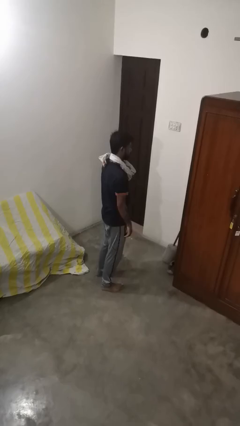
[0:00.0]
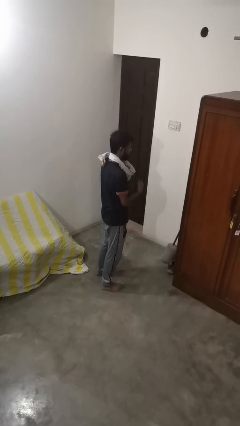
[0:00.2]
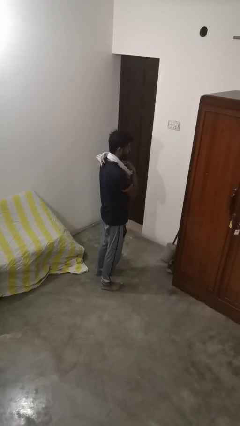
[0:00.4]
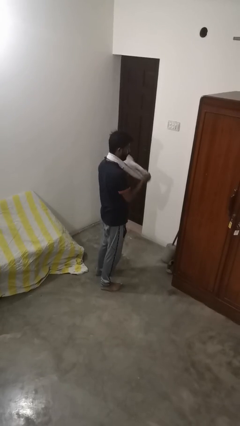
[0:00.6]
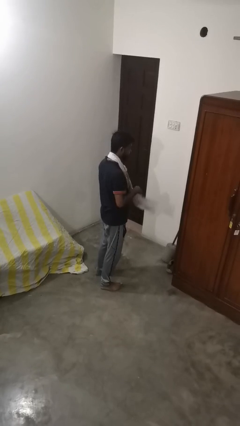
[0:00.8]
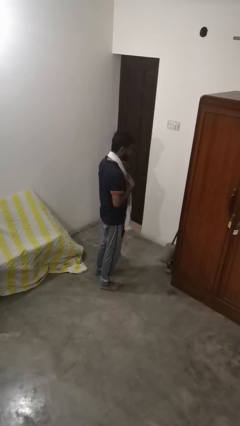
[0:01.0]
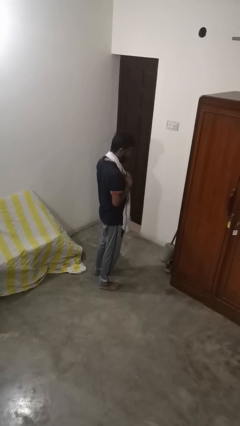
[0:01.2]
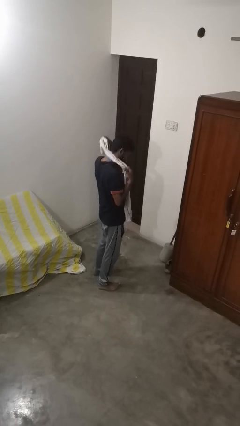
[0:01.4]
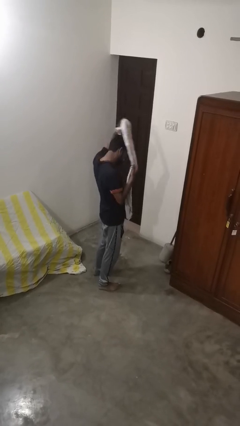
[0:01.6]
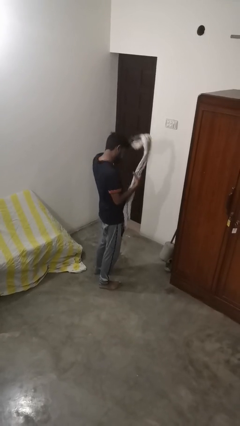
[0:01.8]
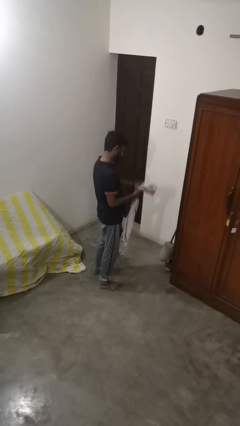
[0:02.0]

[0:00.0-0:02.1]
person takes off scarf

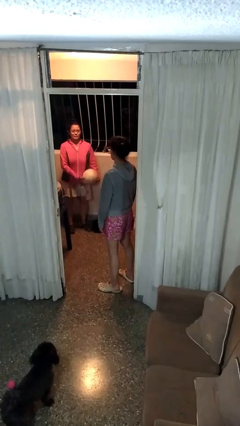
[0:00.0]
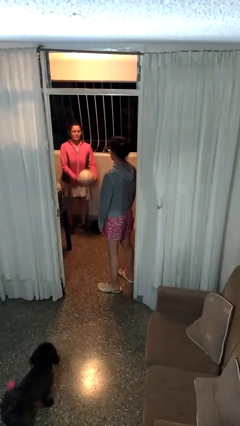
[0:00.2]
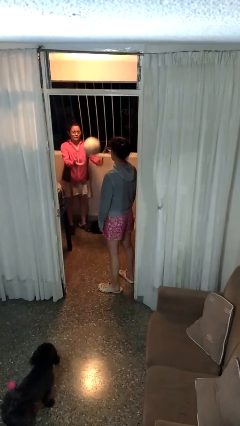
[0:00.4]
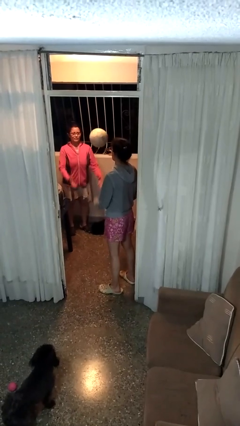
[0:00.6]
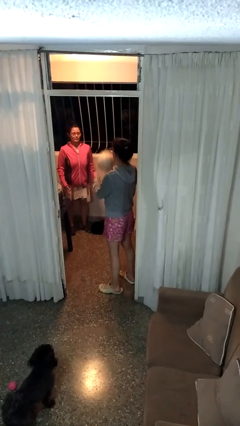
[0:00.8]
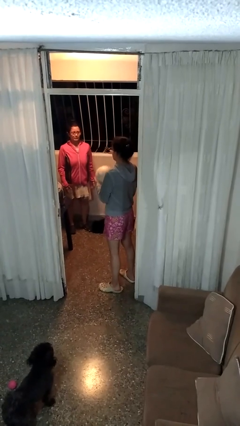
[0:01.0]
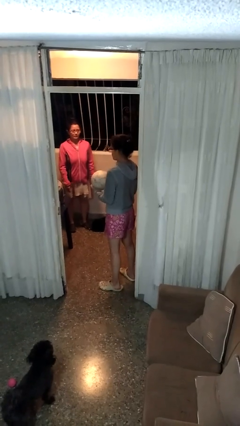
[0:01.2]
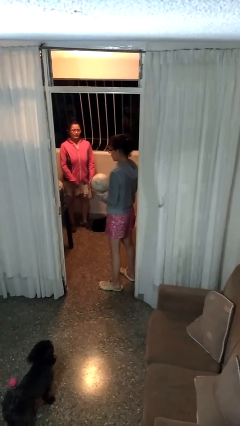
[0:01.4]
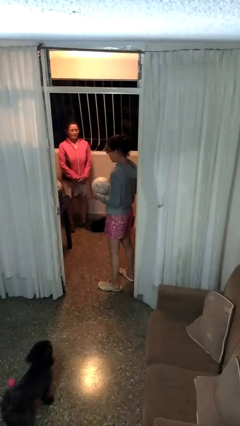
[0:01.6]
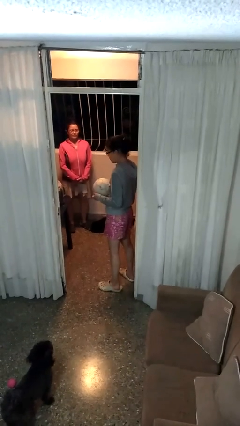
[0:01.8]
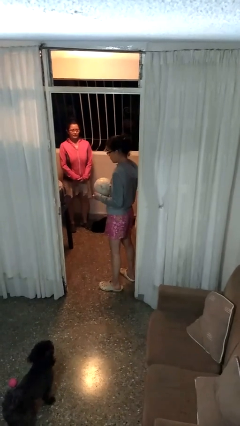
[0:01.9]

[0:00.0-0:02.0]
person catches object from person

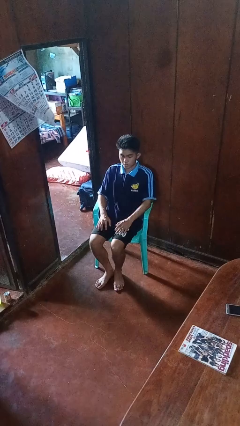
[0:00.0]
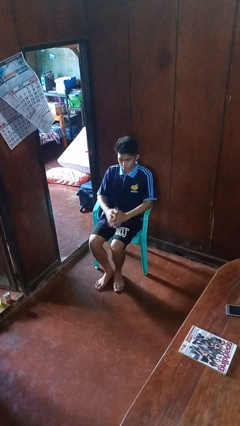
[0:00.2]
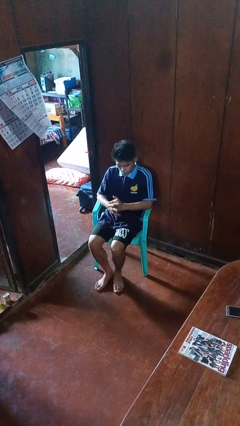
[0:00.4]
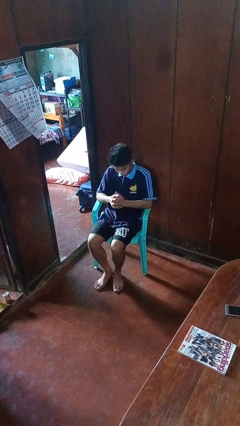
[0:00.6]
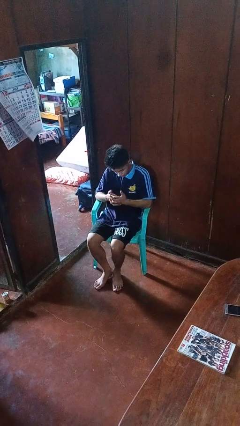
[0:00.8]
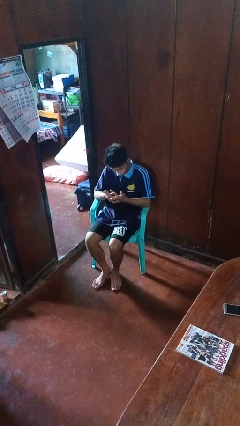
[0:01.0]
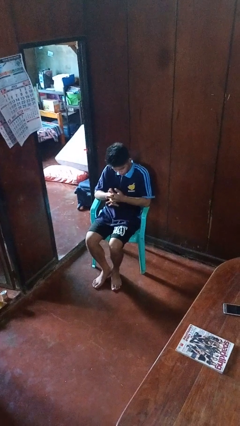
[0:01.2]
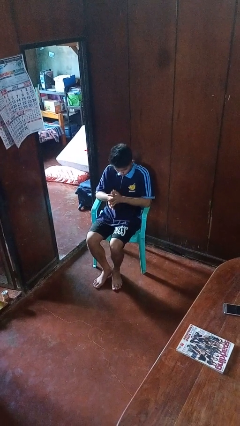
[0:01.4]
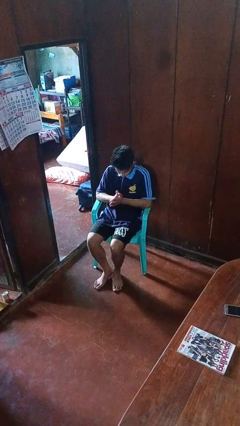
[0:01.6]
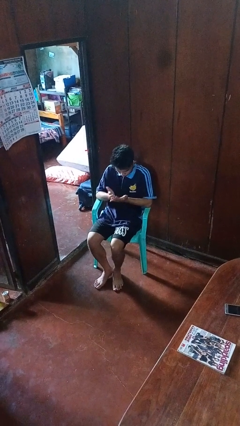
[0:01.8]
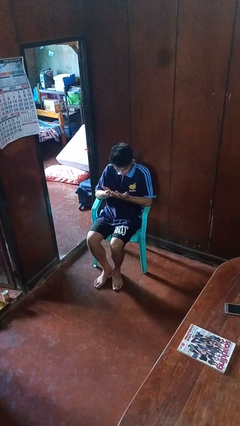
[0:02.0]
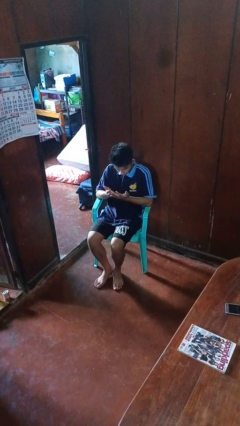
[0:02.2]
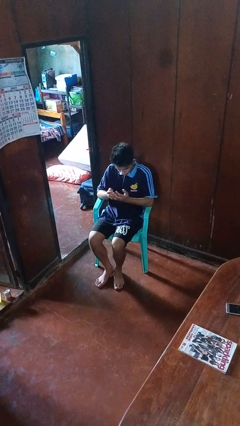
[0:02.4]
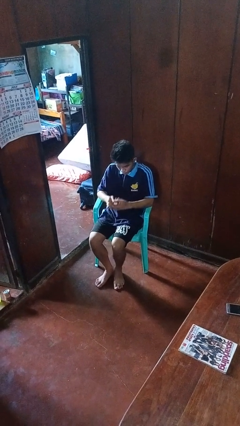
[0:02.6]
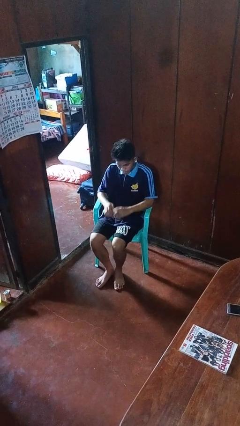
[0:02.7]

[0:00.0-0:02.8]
person looks at hands in lap

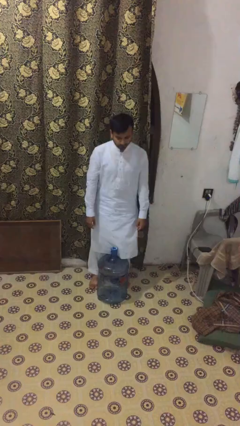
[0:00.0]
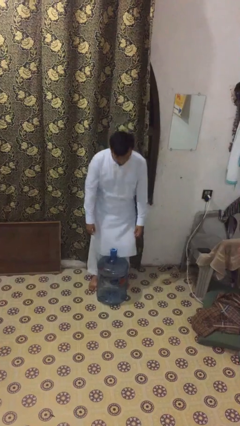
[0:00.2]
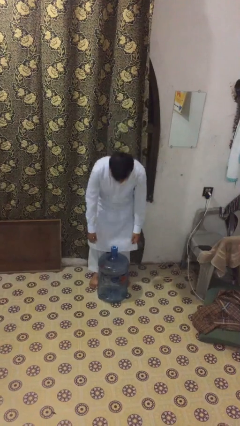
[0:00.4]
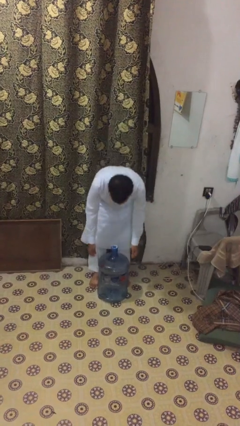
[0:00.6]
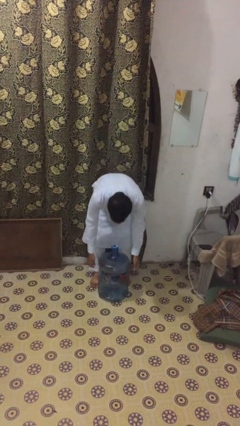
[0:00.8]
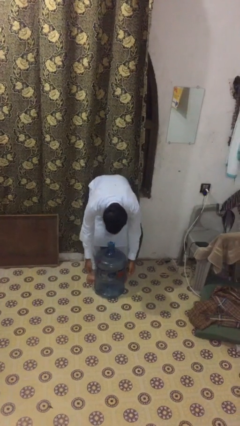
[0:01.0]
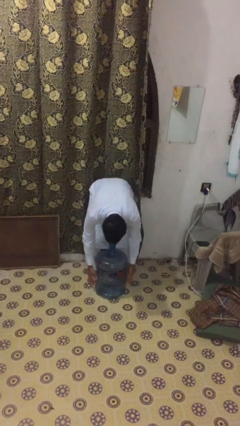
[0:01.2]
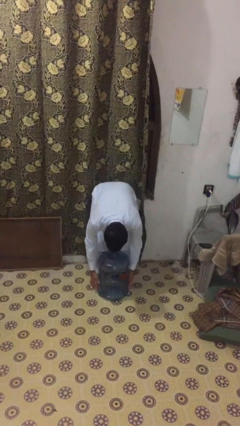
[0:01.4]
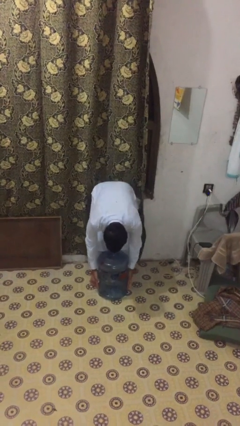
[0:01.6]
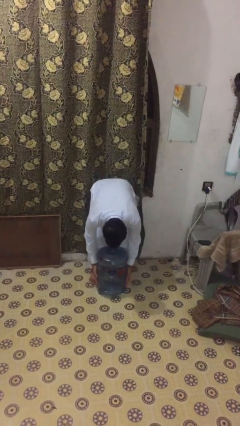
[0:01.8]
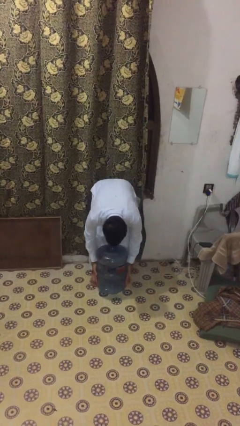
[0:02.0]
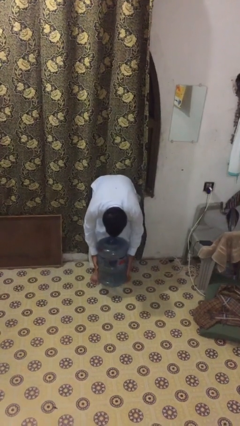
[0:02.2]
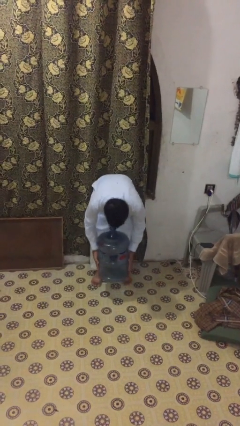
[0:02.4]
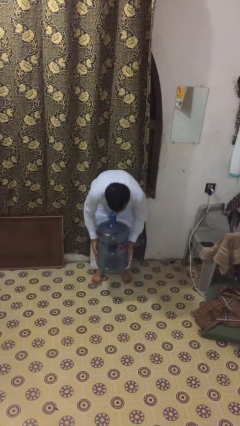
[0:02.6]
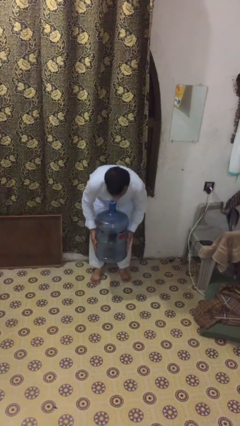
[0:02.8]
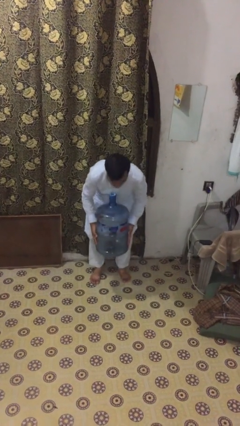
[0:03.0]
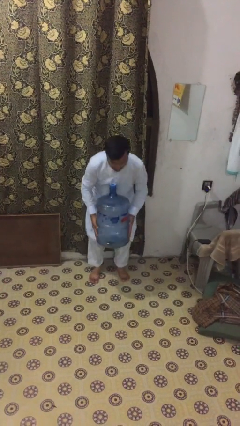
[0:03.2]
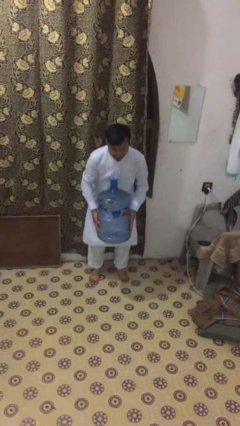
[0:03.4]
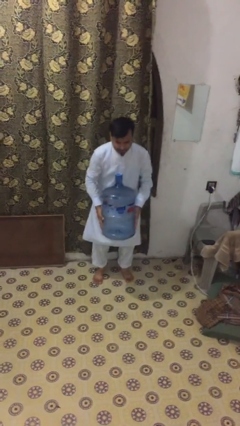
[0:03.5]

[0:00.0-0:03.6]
person picks up object from floor

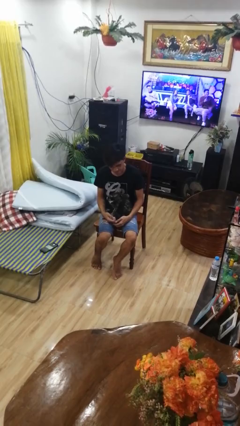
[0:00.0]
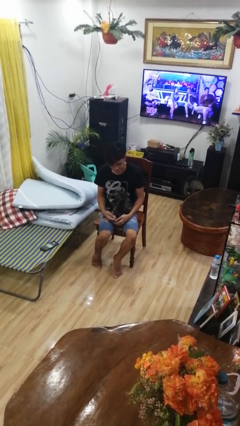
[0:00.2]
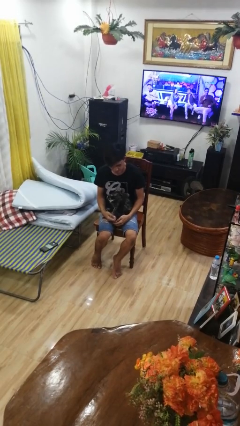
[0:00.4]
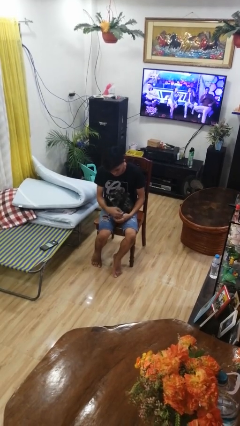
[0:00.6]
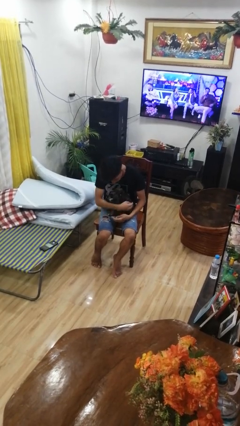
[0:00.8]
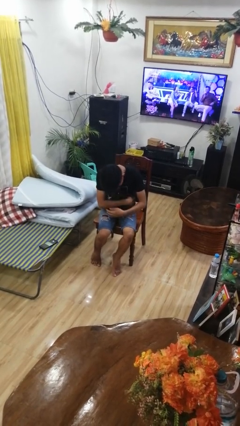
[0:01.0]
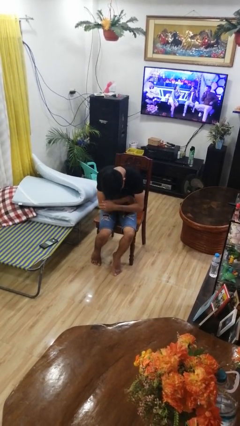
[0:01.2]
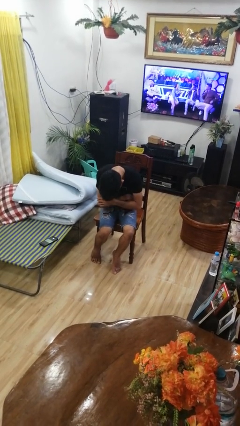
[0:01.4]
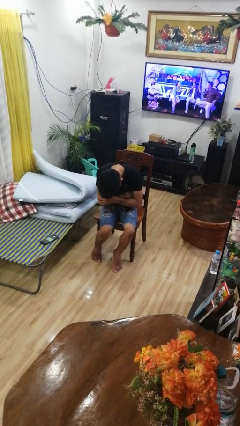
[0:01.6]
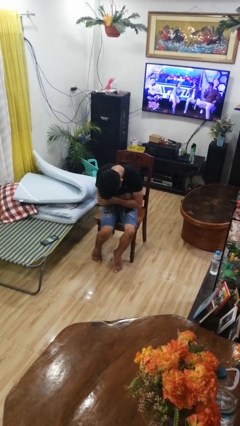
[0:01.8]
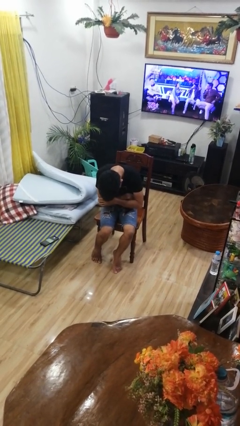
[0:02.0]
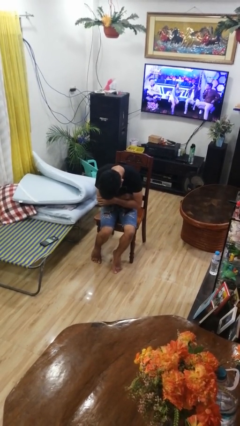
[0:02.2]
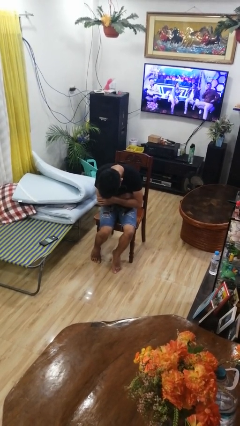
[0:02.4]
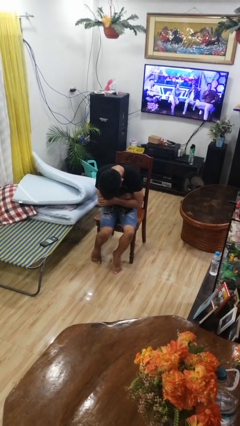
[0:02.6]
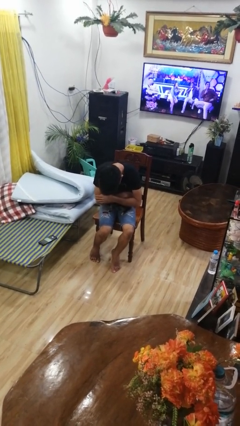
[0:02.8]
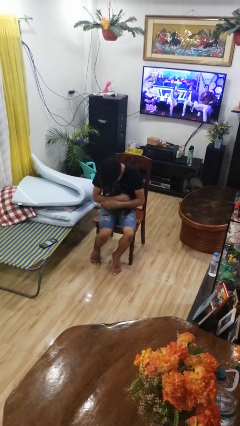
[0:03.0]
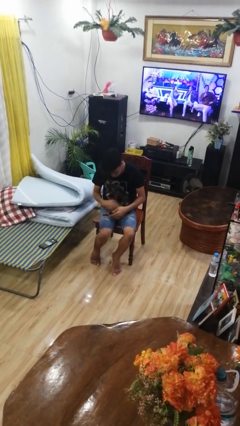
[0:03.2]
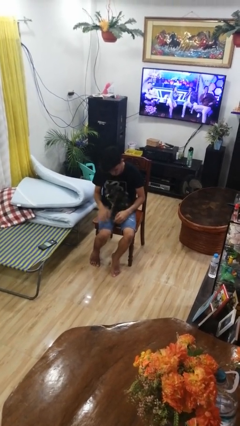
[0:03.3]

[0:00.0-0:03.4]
person hugs cat

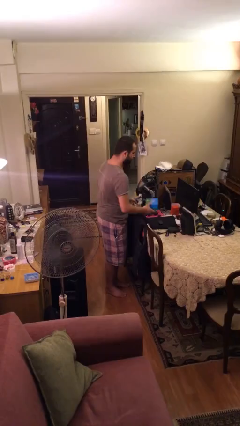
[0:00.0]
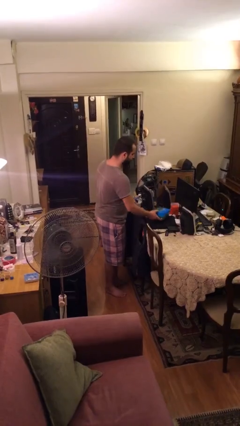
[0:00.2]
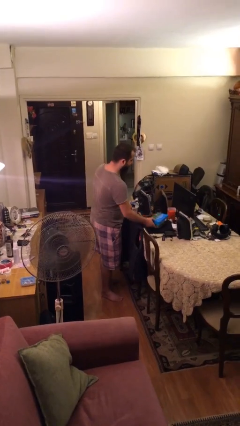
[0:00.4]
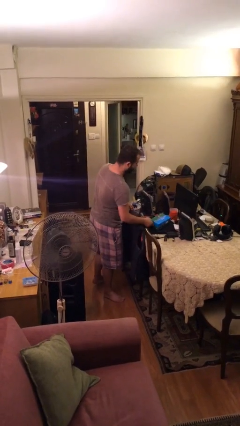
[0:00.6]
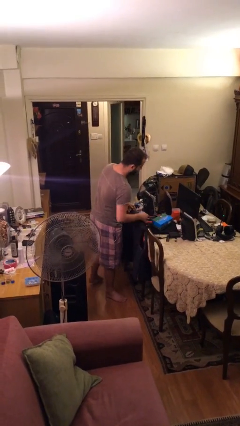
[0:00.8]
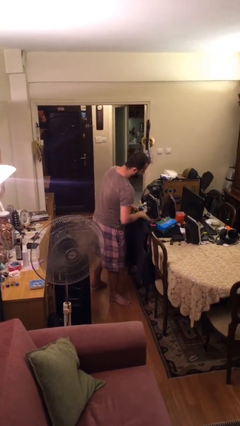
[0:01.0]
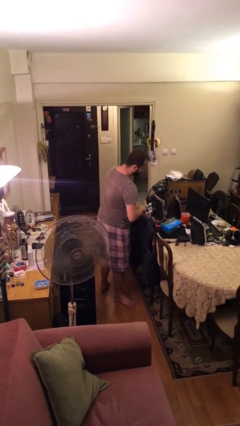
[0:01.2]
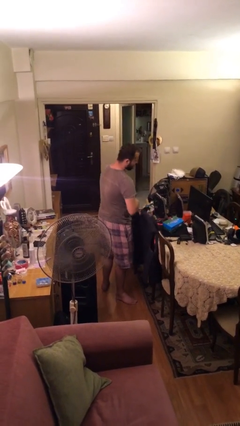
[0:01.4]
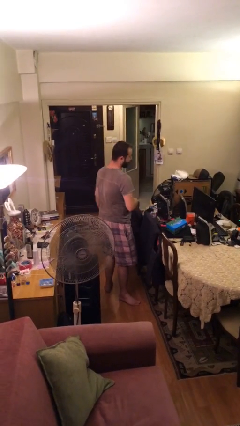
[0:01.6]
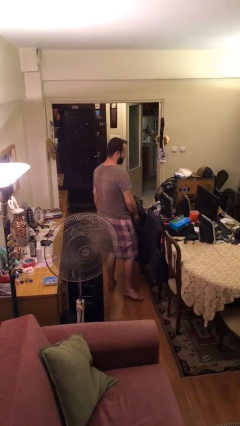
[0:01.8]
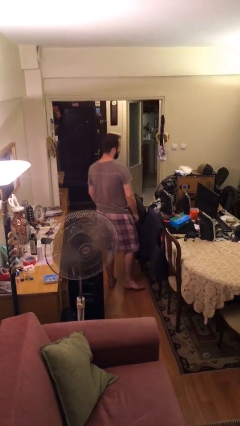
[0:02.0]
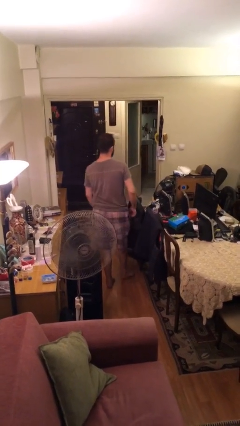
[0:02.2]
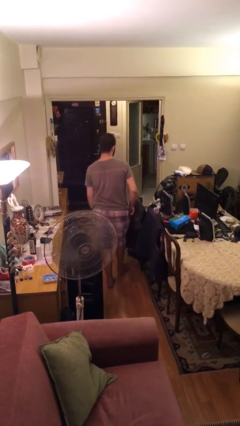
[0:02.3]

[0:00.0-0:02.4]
person puts down object on table

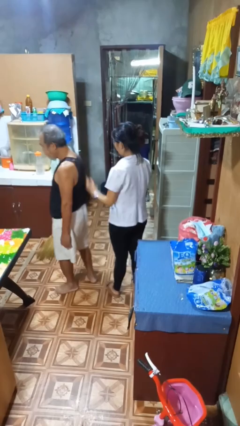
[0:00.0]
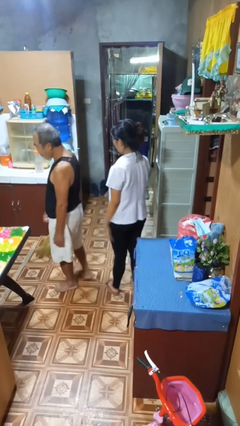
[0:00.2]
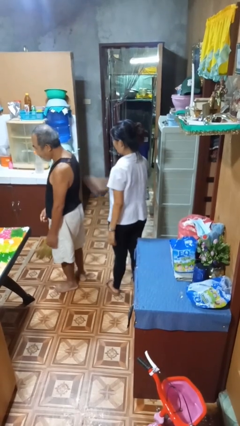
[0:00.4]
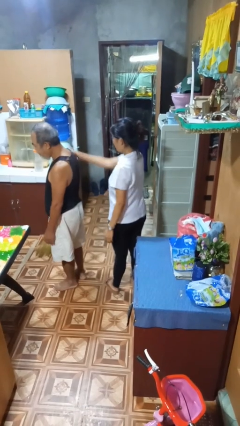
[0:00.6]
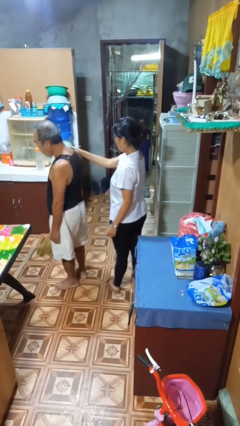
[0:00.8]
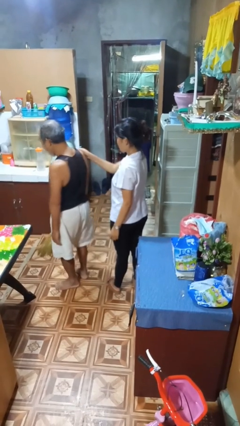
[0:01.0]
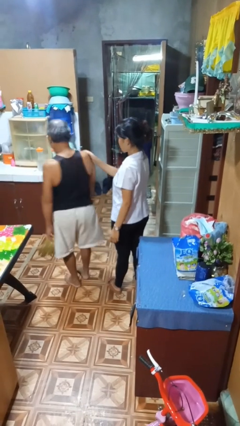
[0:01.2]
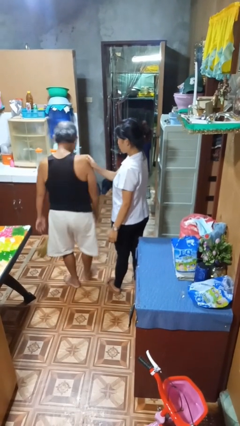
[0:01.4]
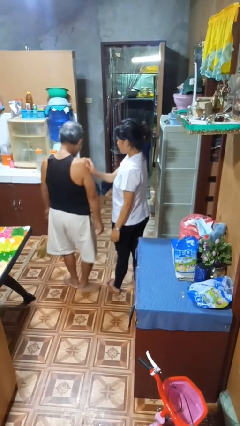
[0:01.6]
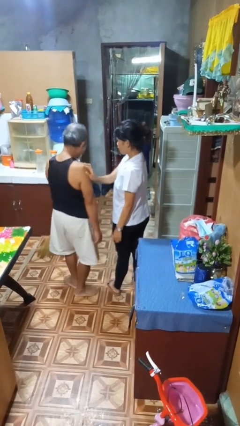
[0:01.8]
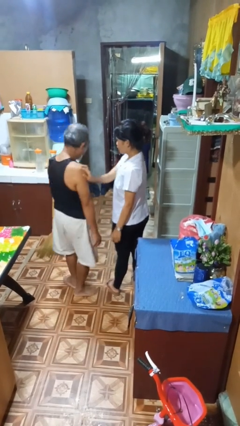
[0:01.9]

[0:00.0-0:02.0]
person grabs person by shoulder
